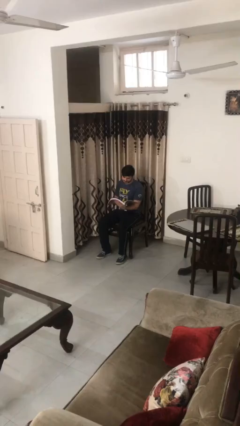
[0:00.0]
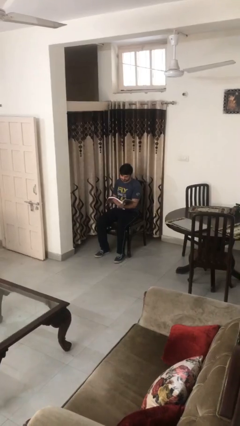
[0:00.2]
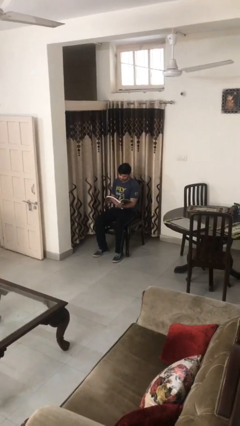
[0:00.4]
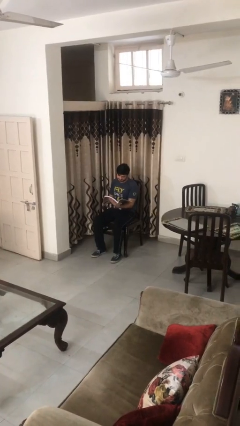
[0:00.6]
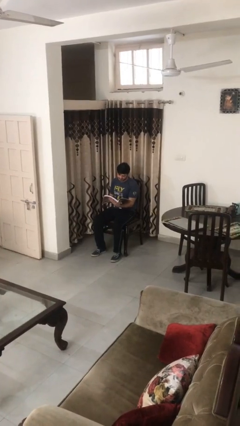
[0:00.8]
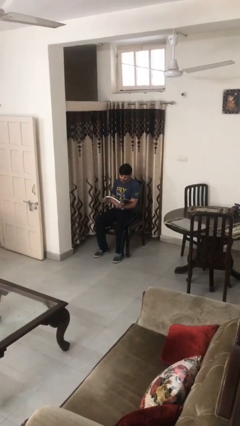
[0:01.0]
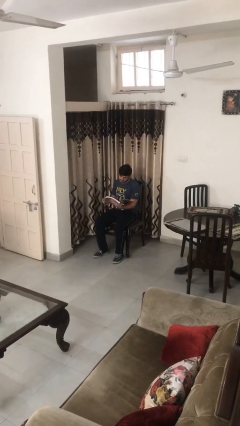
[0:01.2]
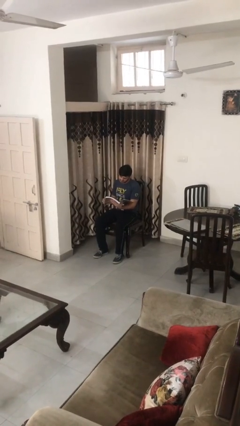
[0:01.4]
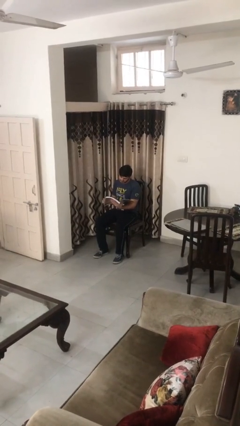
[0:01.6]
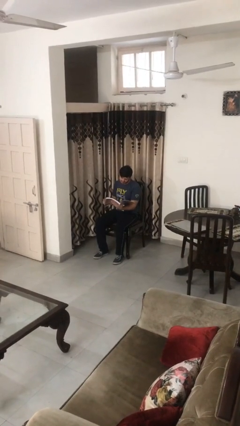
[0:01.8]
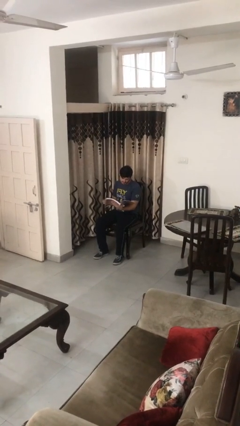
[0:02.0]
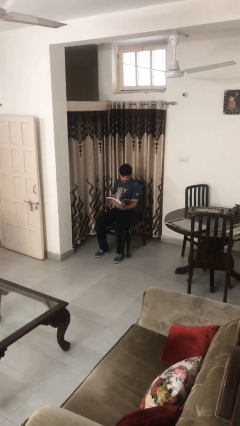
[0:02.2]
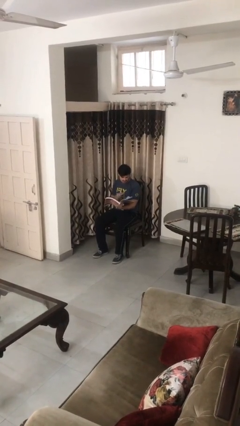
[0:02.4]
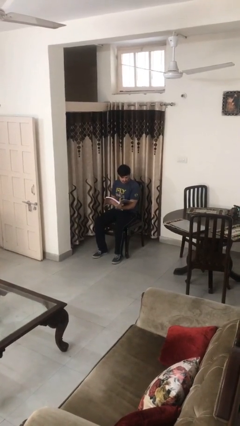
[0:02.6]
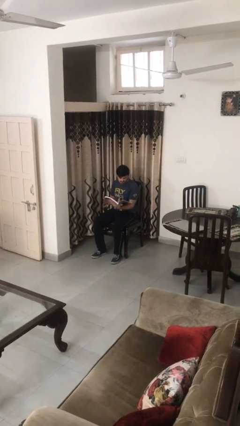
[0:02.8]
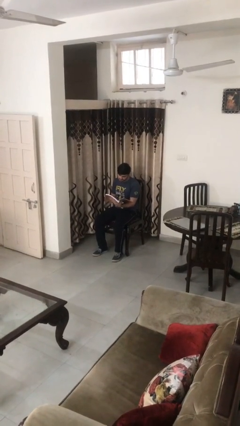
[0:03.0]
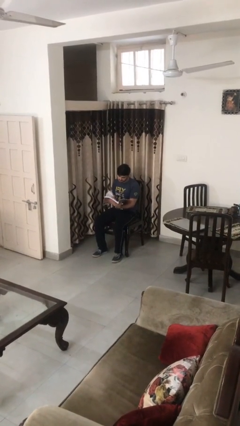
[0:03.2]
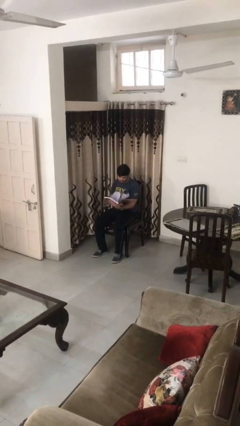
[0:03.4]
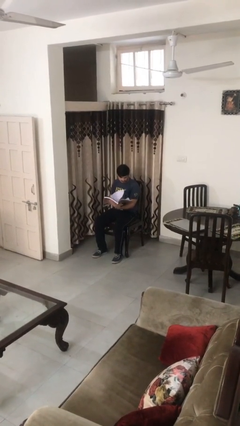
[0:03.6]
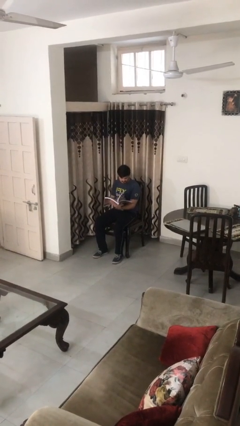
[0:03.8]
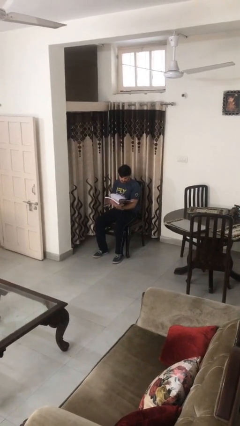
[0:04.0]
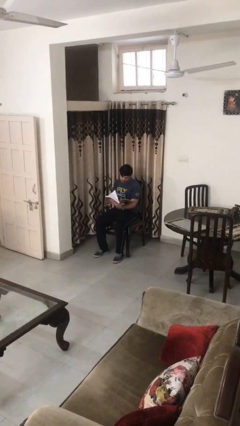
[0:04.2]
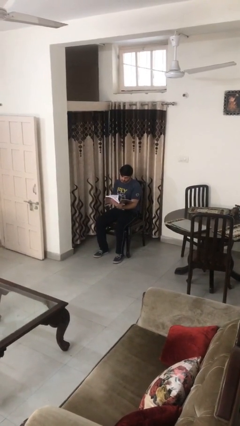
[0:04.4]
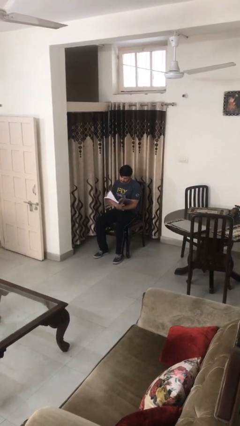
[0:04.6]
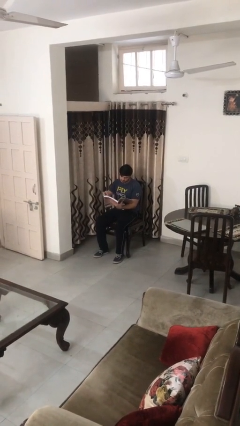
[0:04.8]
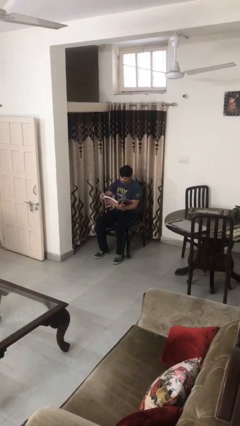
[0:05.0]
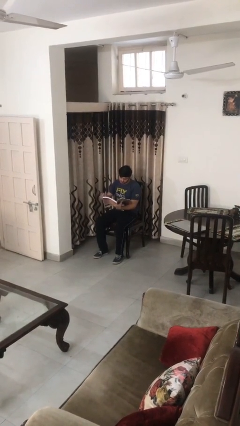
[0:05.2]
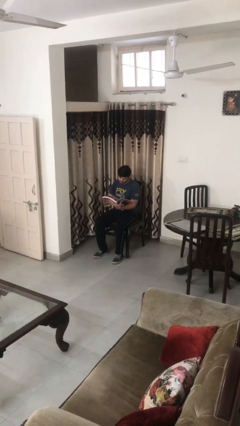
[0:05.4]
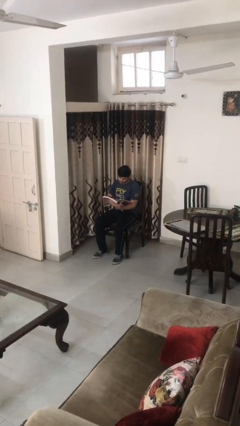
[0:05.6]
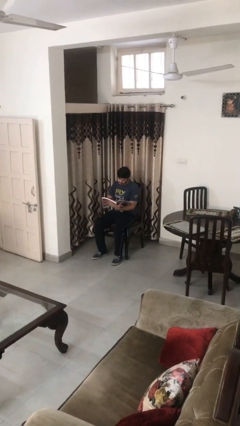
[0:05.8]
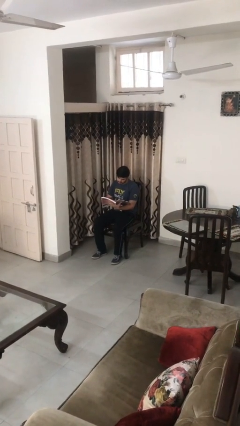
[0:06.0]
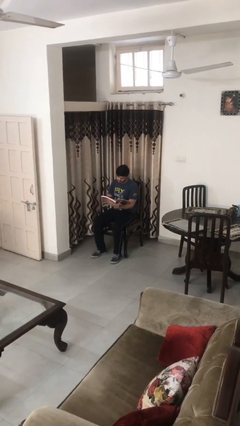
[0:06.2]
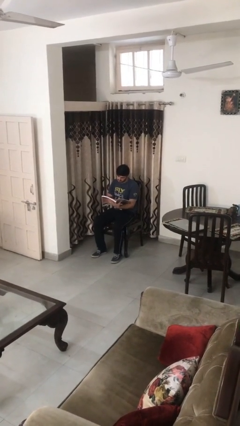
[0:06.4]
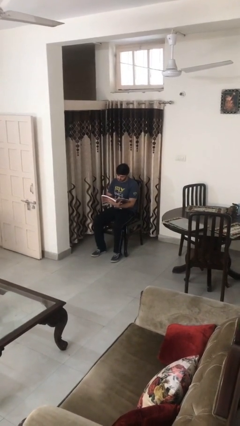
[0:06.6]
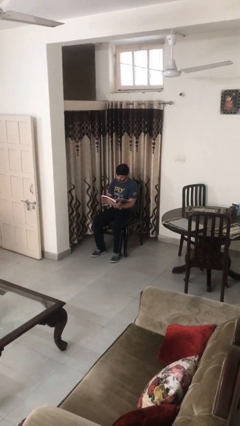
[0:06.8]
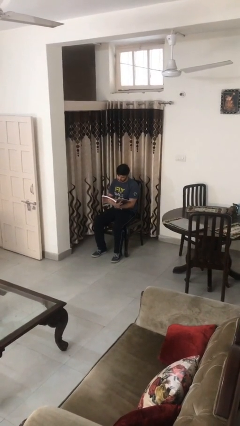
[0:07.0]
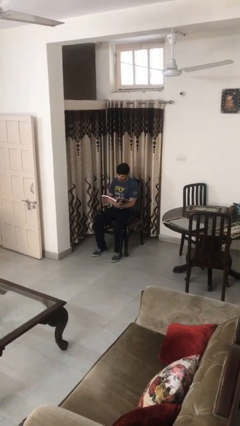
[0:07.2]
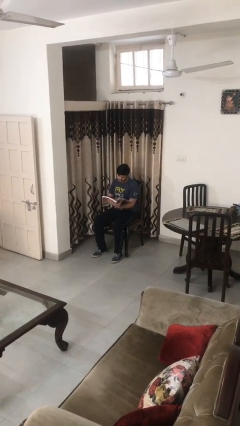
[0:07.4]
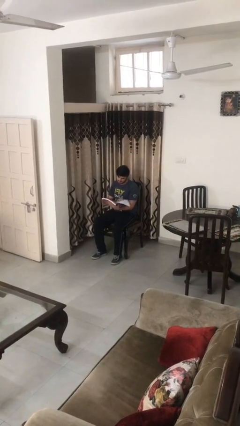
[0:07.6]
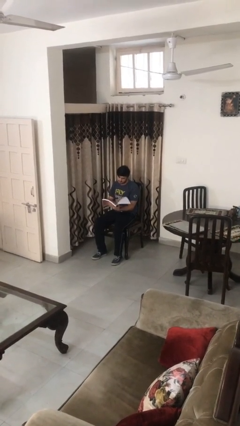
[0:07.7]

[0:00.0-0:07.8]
person reads document

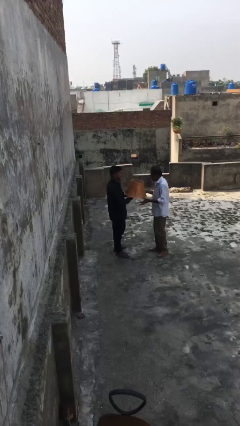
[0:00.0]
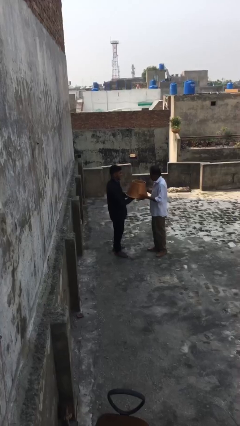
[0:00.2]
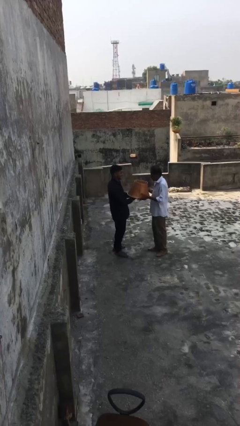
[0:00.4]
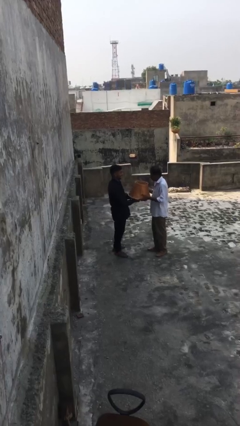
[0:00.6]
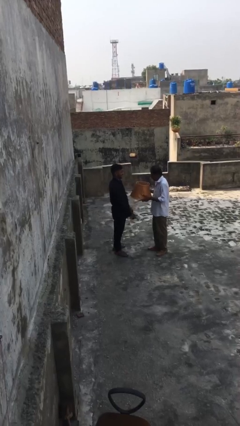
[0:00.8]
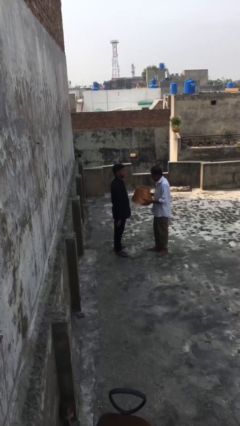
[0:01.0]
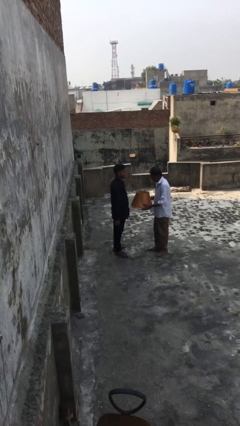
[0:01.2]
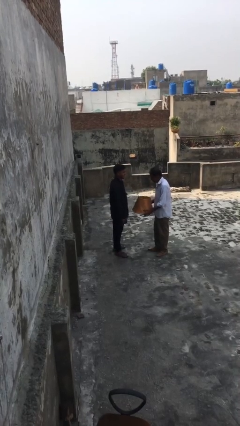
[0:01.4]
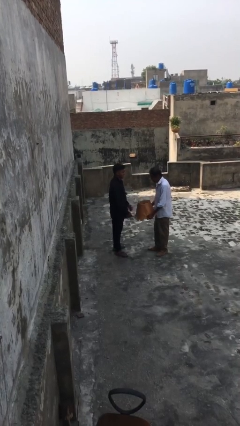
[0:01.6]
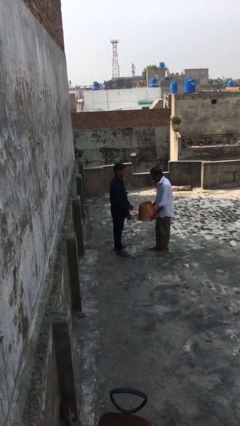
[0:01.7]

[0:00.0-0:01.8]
person transfers object to person

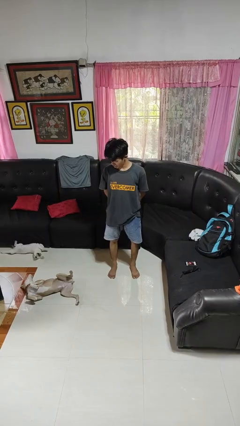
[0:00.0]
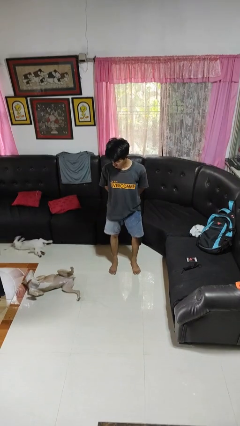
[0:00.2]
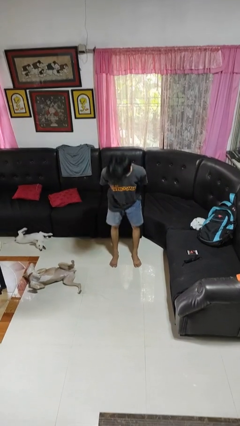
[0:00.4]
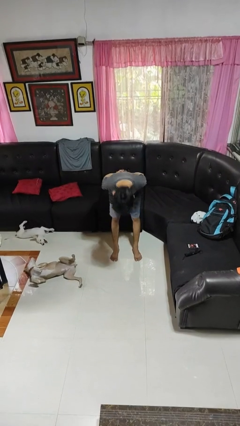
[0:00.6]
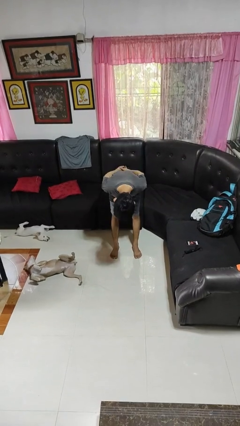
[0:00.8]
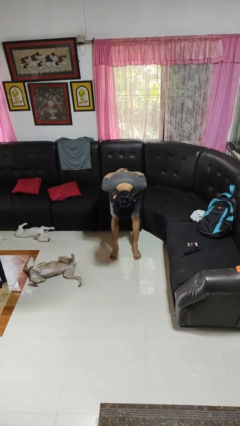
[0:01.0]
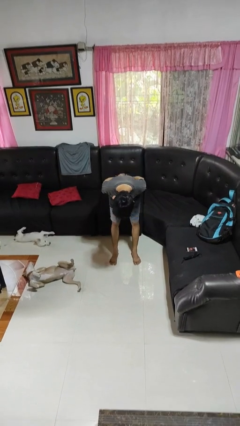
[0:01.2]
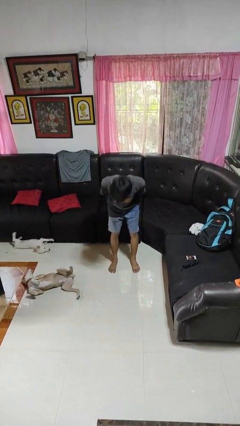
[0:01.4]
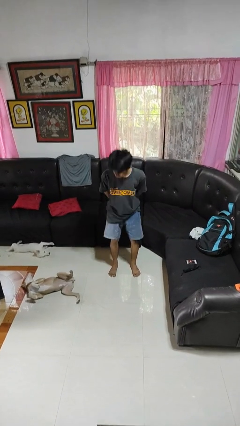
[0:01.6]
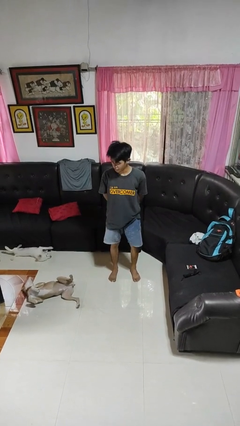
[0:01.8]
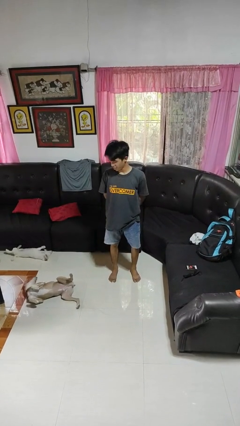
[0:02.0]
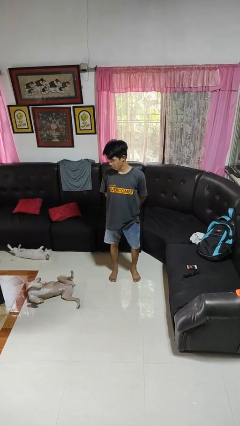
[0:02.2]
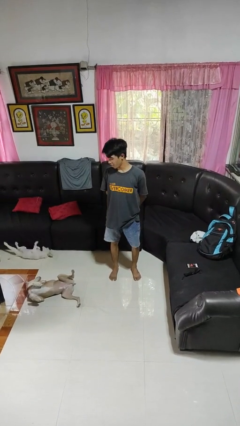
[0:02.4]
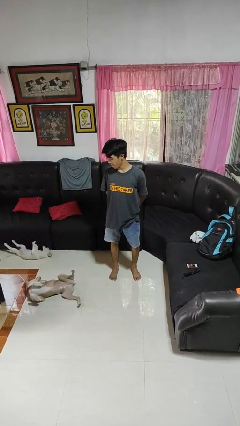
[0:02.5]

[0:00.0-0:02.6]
person bows

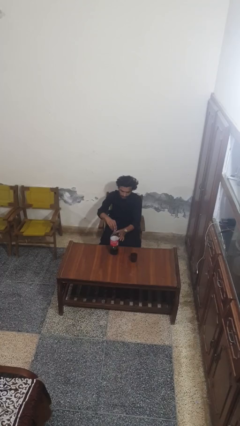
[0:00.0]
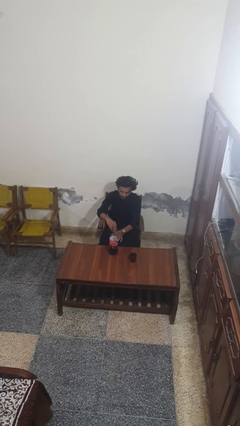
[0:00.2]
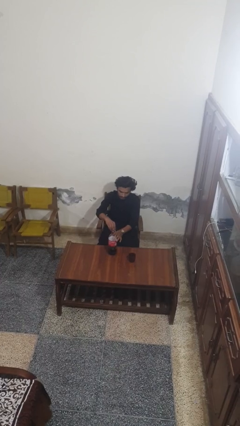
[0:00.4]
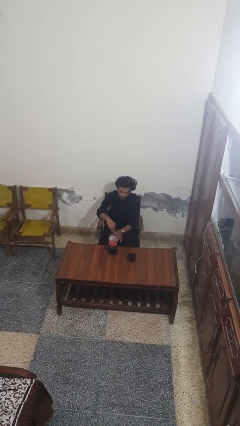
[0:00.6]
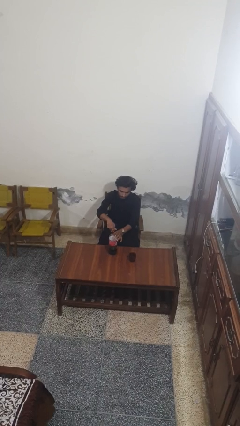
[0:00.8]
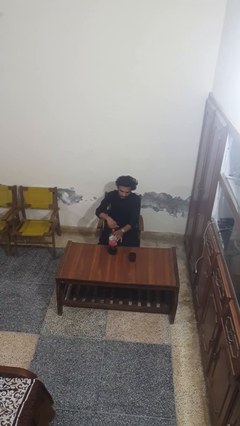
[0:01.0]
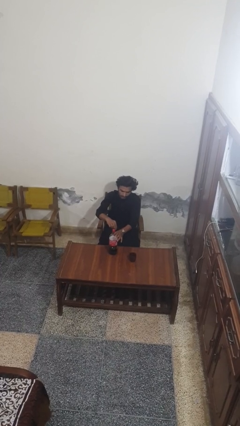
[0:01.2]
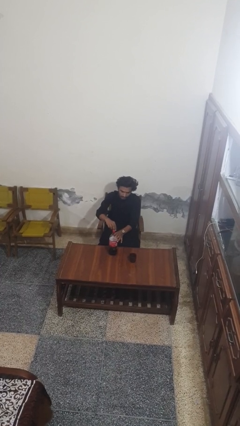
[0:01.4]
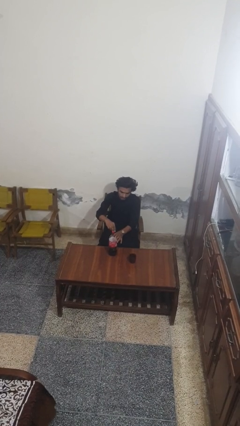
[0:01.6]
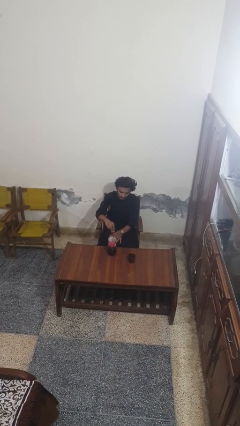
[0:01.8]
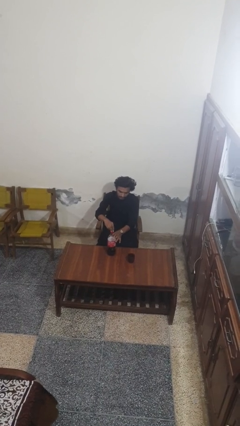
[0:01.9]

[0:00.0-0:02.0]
person screws lid to bottle

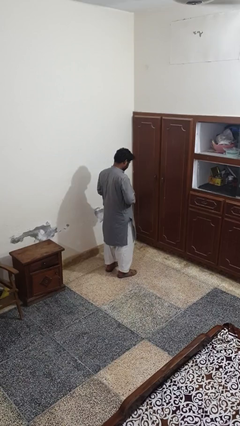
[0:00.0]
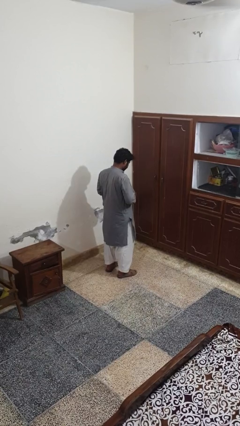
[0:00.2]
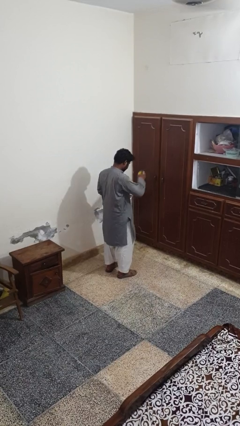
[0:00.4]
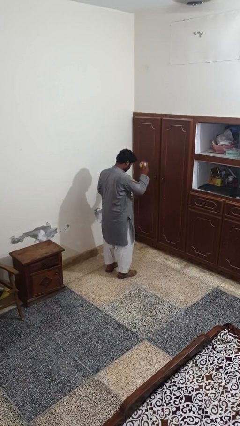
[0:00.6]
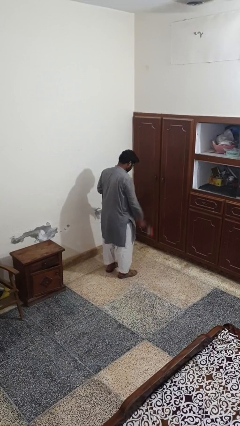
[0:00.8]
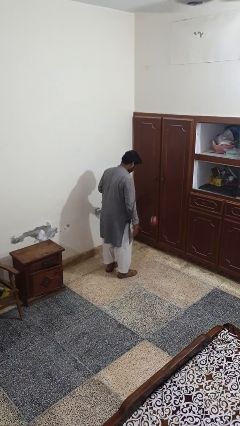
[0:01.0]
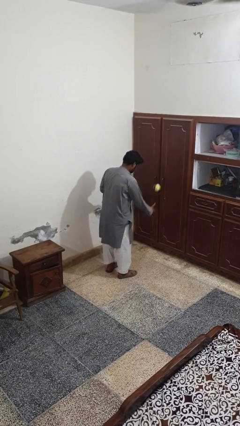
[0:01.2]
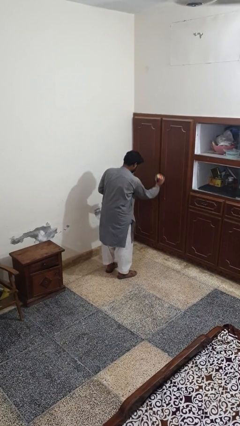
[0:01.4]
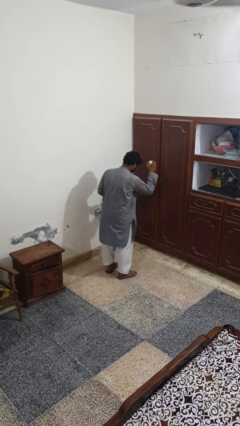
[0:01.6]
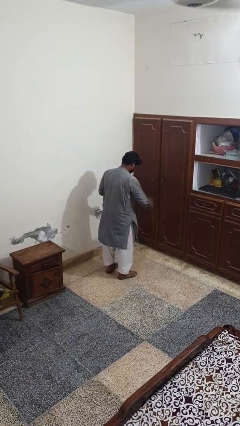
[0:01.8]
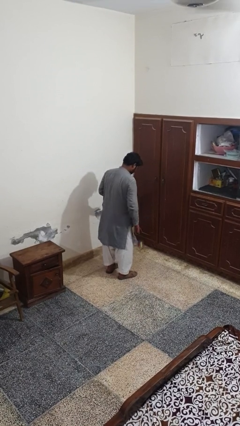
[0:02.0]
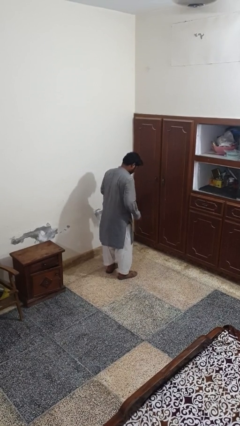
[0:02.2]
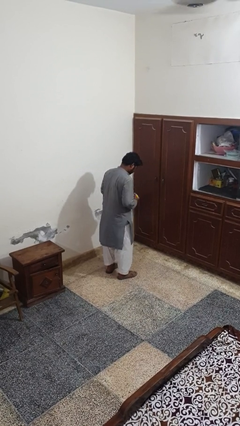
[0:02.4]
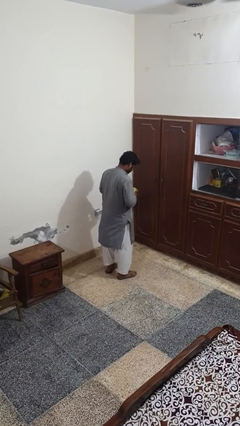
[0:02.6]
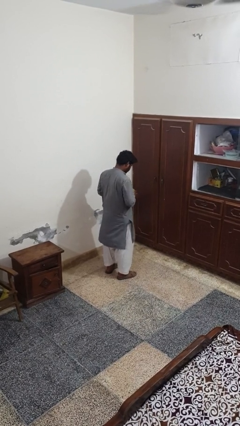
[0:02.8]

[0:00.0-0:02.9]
person bounces ball on floor

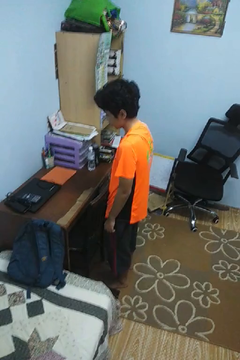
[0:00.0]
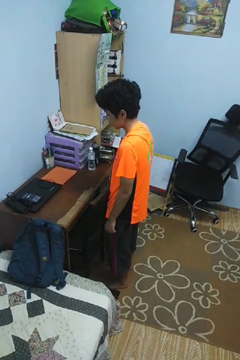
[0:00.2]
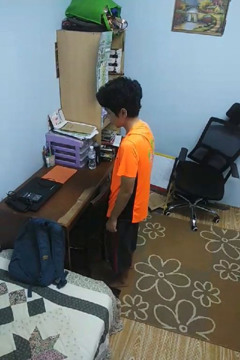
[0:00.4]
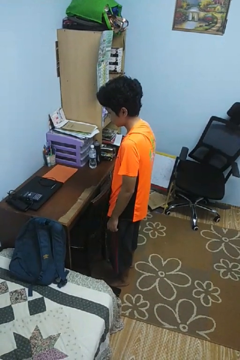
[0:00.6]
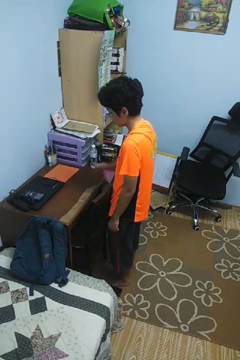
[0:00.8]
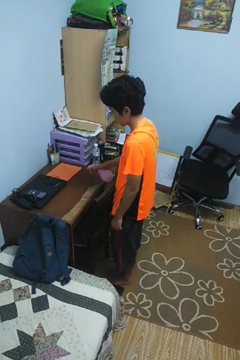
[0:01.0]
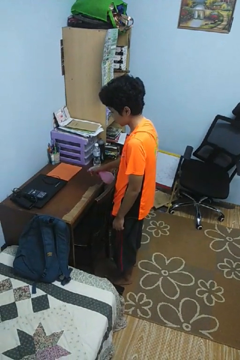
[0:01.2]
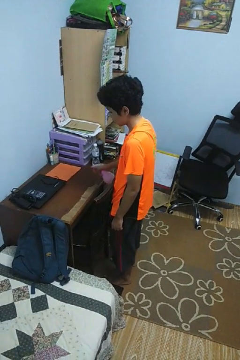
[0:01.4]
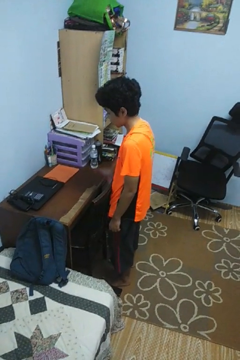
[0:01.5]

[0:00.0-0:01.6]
person sprays from bottle
